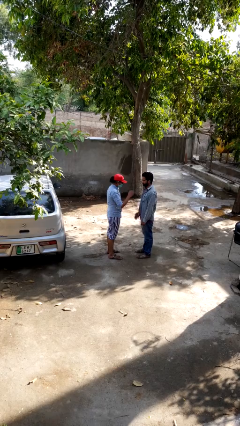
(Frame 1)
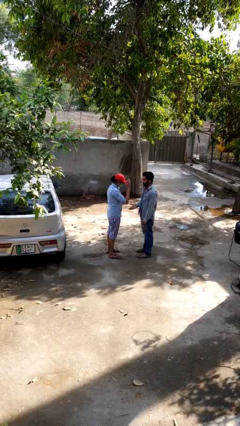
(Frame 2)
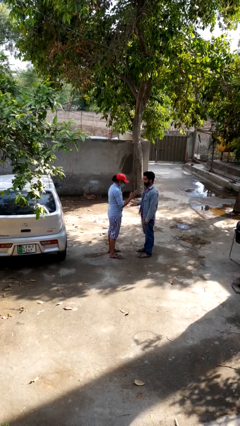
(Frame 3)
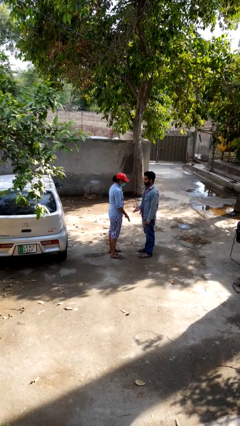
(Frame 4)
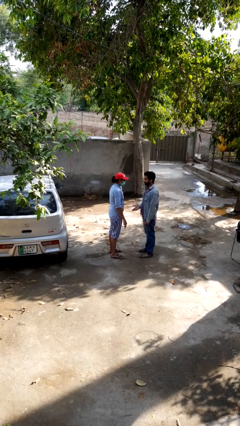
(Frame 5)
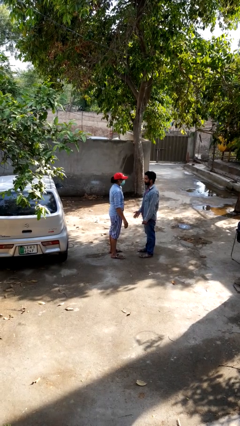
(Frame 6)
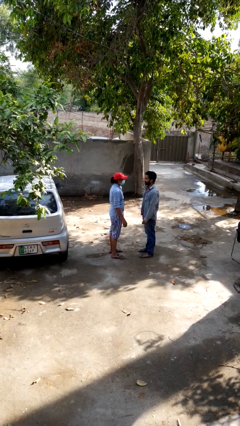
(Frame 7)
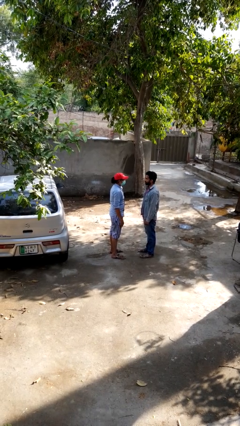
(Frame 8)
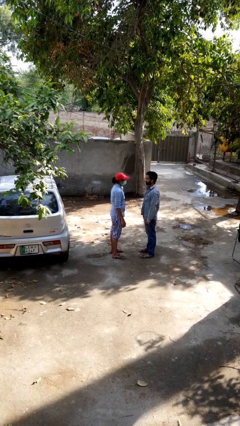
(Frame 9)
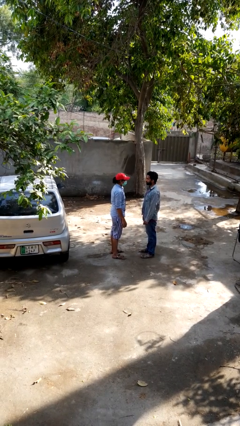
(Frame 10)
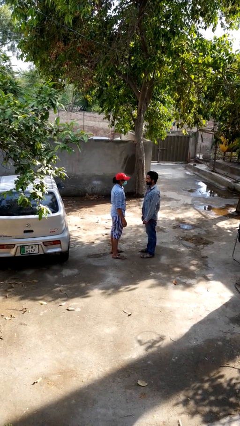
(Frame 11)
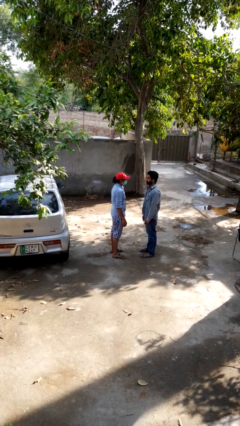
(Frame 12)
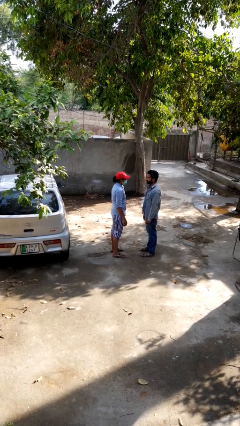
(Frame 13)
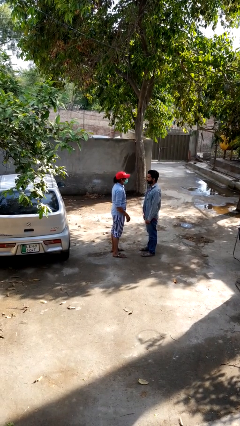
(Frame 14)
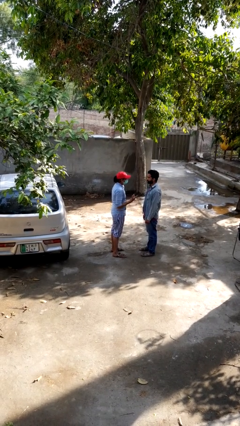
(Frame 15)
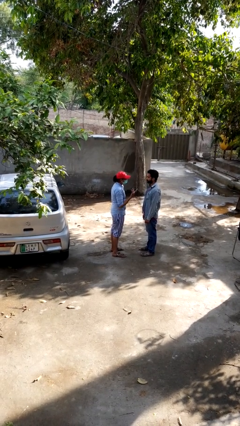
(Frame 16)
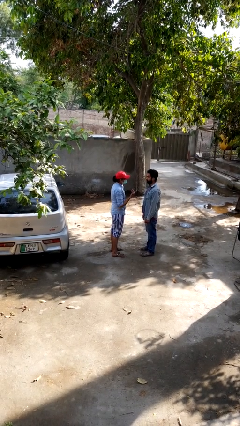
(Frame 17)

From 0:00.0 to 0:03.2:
person highfives hand

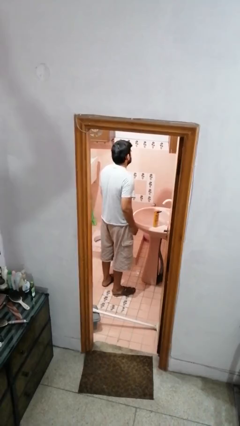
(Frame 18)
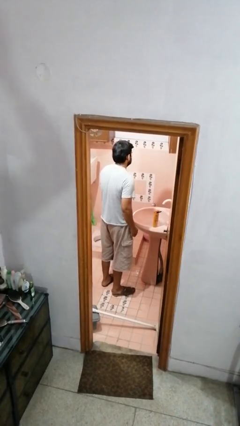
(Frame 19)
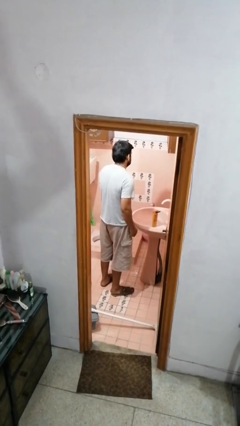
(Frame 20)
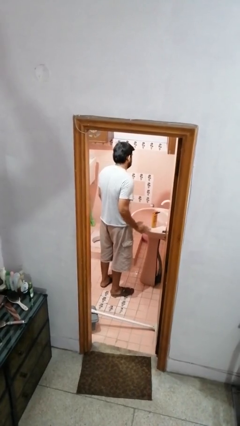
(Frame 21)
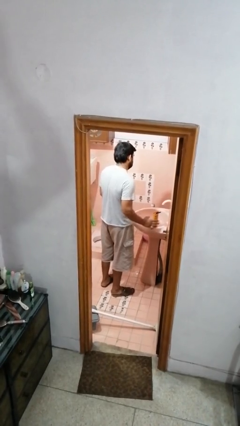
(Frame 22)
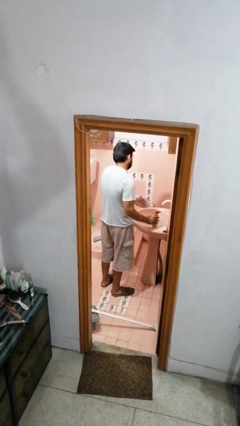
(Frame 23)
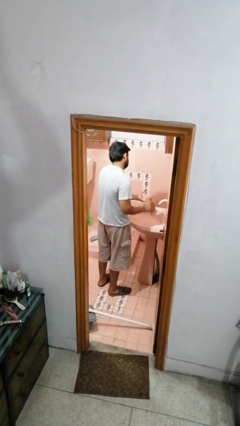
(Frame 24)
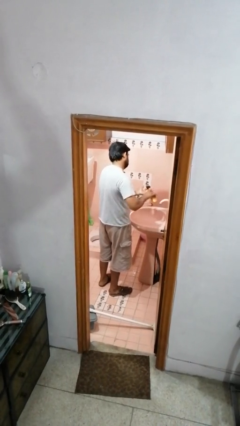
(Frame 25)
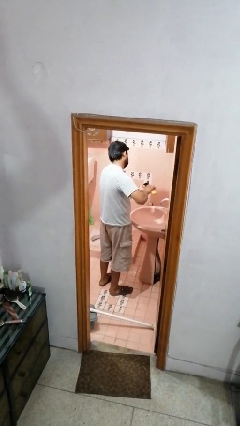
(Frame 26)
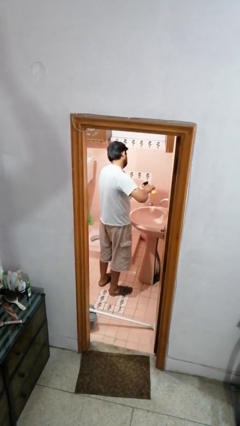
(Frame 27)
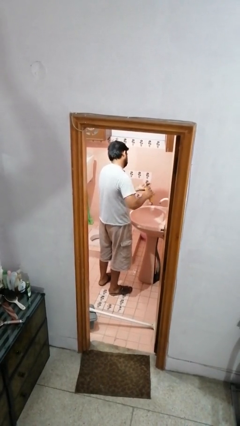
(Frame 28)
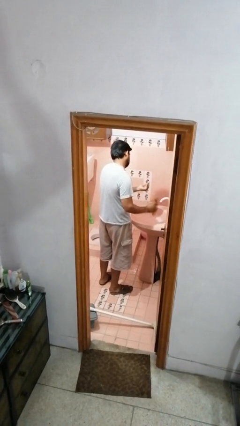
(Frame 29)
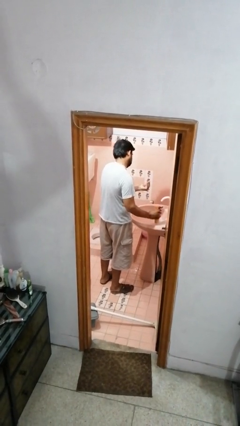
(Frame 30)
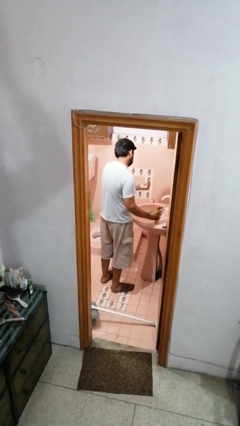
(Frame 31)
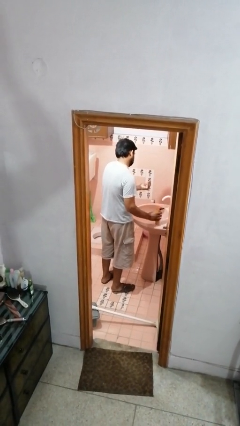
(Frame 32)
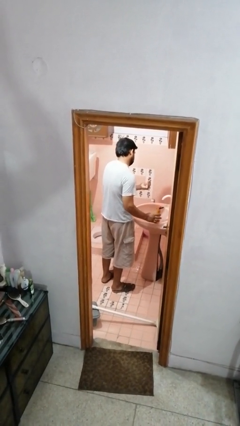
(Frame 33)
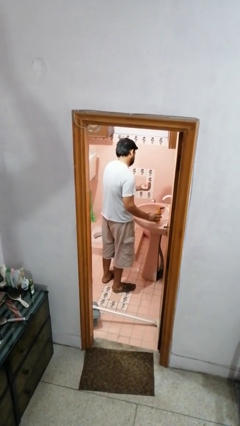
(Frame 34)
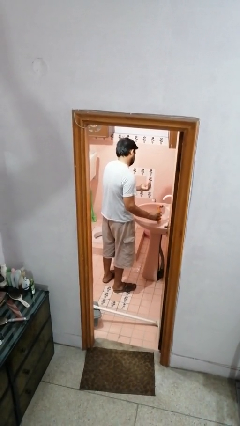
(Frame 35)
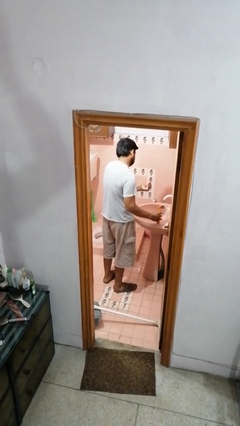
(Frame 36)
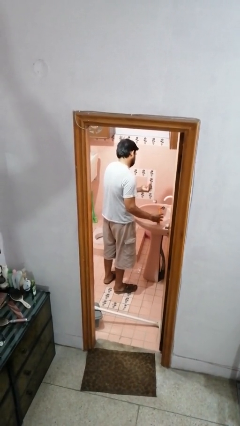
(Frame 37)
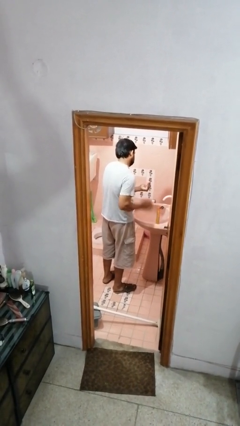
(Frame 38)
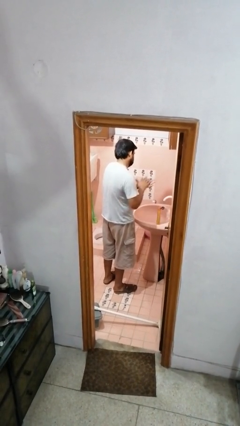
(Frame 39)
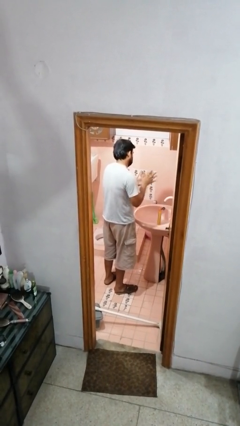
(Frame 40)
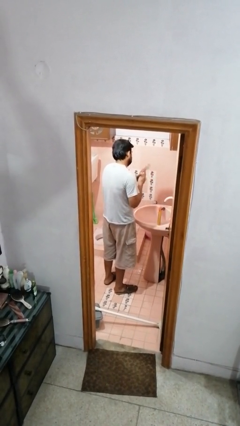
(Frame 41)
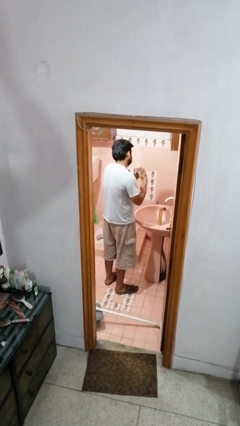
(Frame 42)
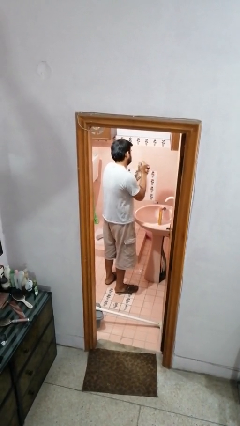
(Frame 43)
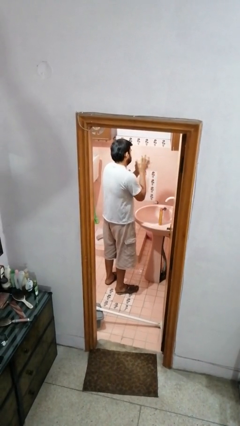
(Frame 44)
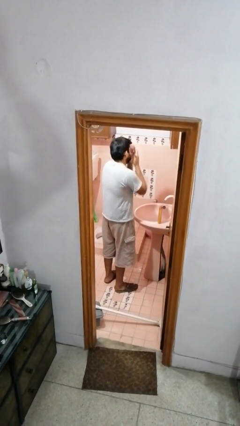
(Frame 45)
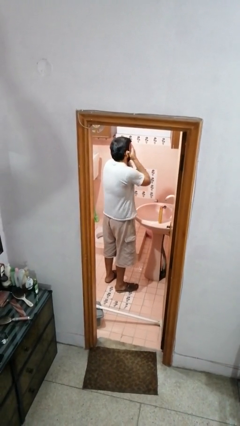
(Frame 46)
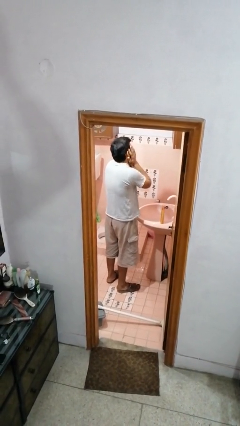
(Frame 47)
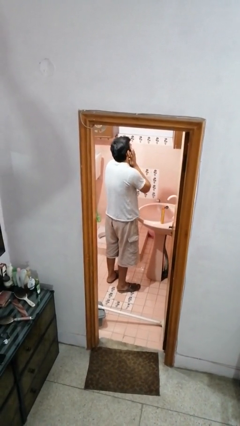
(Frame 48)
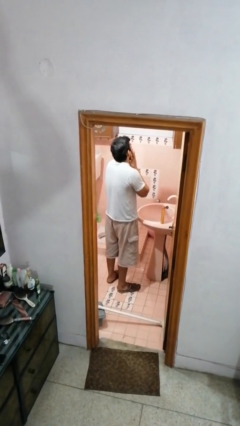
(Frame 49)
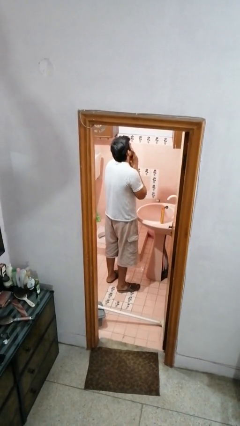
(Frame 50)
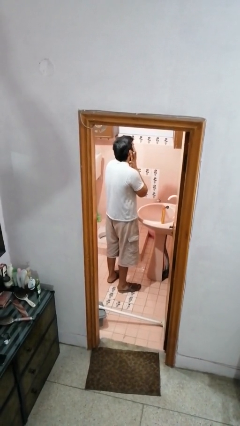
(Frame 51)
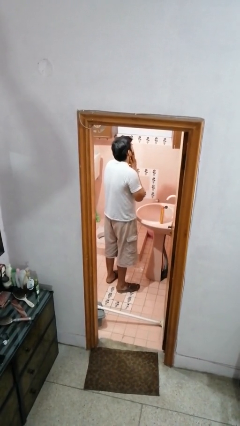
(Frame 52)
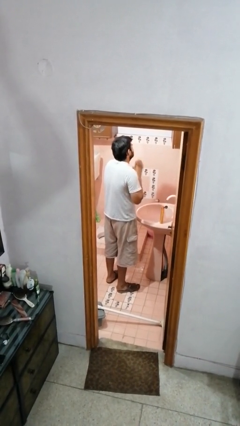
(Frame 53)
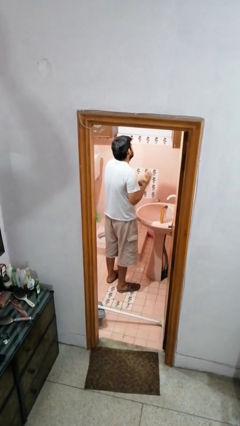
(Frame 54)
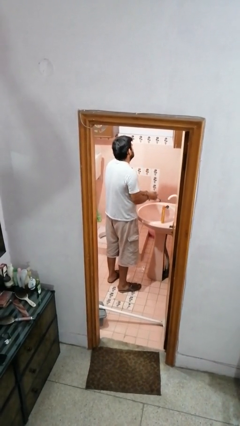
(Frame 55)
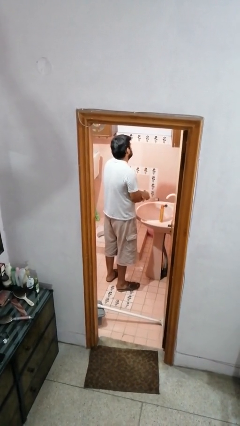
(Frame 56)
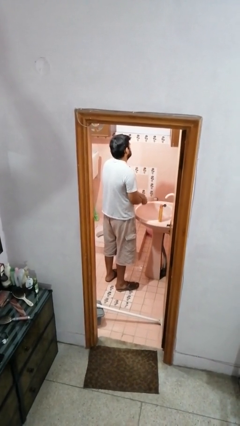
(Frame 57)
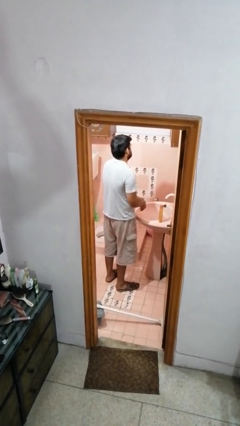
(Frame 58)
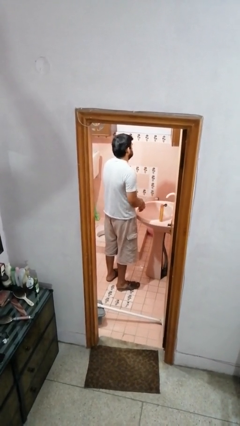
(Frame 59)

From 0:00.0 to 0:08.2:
person applies facial moisturizer

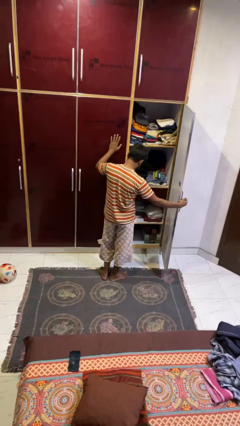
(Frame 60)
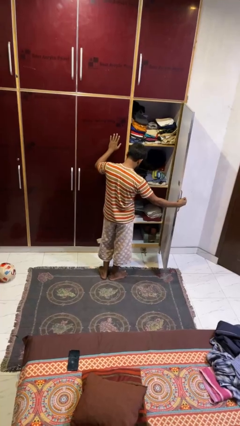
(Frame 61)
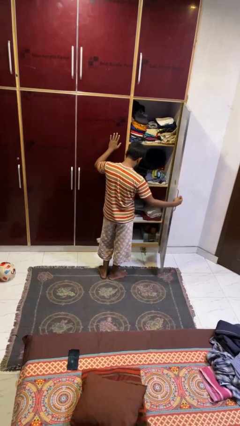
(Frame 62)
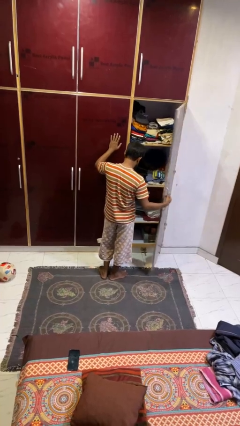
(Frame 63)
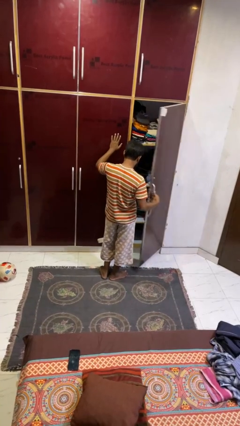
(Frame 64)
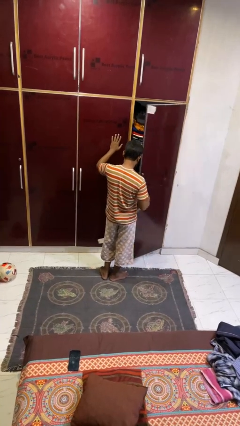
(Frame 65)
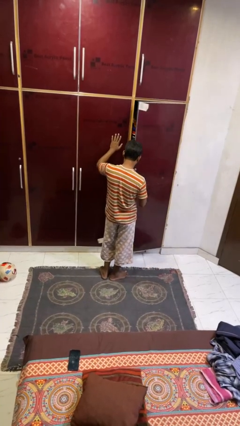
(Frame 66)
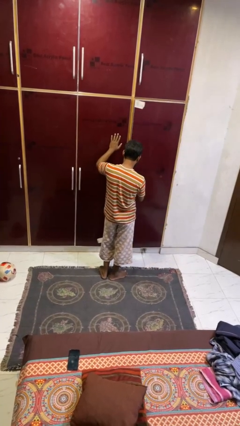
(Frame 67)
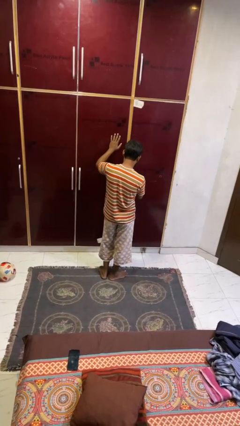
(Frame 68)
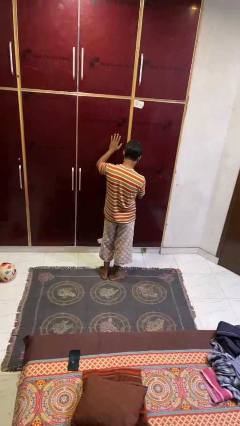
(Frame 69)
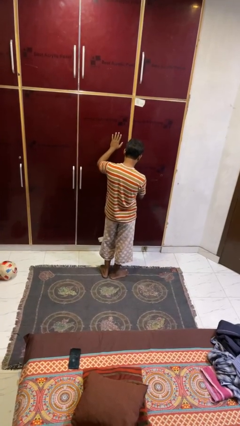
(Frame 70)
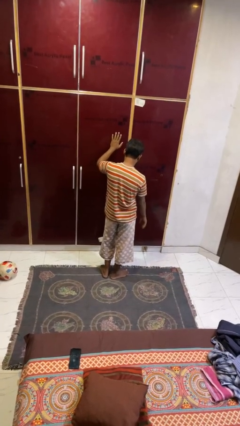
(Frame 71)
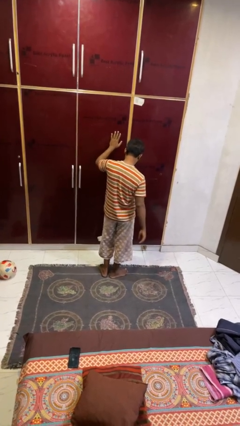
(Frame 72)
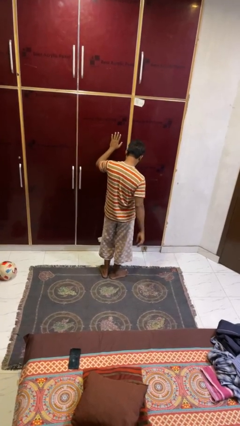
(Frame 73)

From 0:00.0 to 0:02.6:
person closes closet door

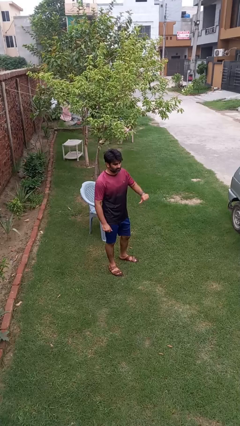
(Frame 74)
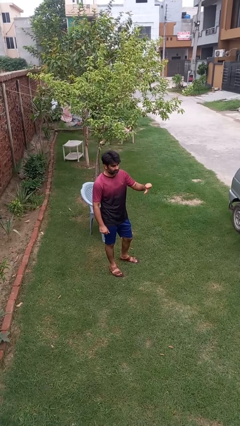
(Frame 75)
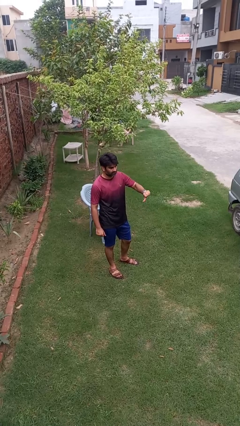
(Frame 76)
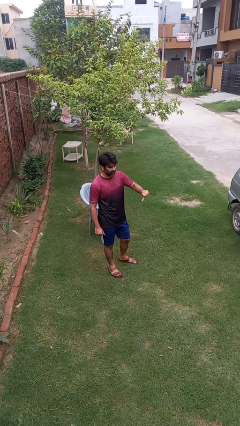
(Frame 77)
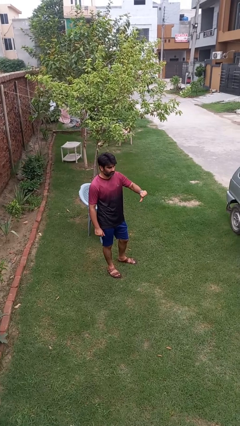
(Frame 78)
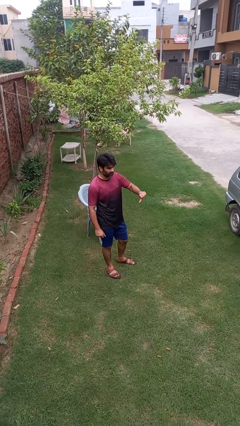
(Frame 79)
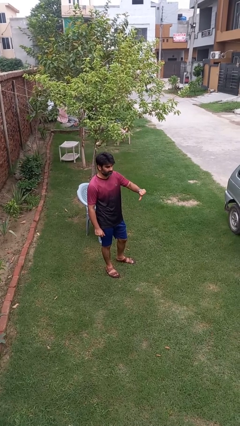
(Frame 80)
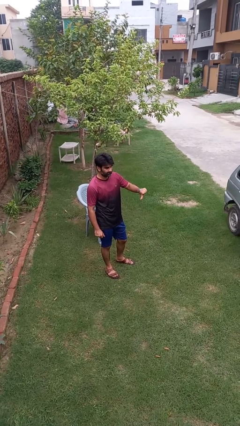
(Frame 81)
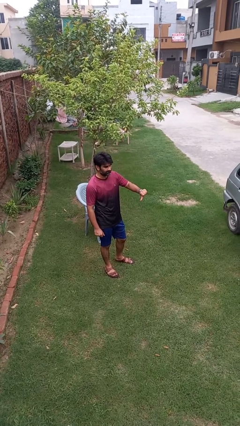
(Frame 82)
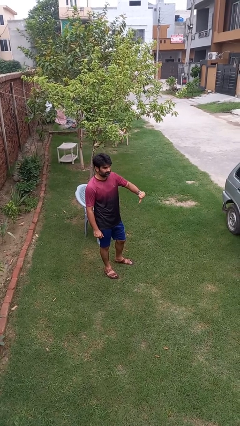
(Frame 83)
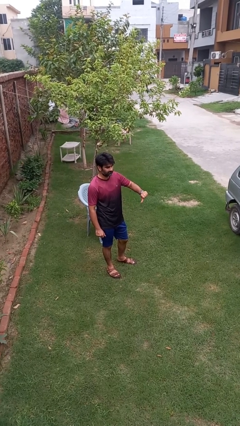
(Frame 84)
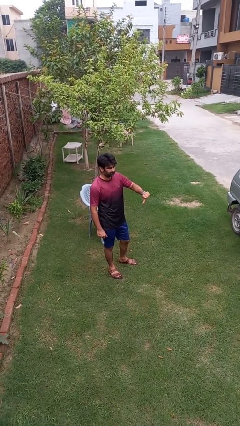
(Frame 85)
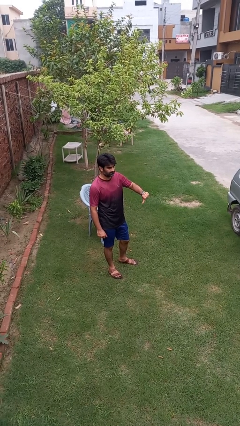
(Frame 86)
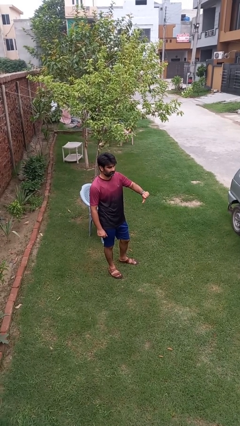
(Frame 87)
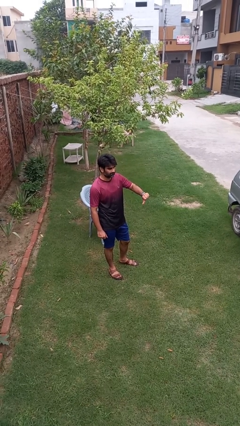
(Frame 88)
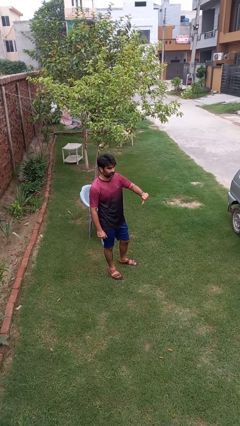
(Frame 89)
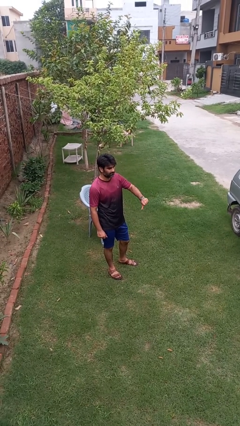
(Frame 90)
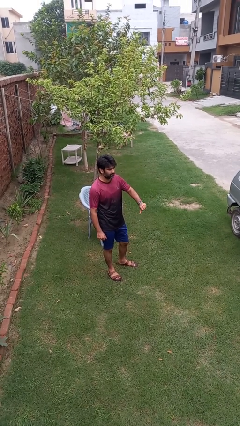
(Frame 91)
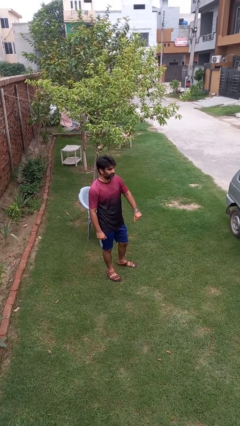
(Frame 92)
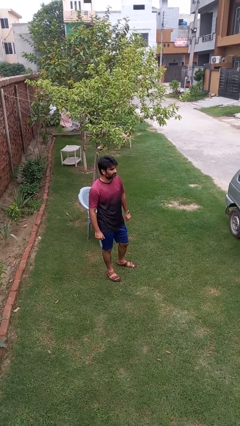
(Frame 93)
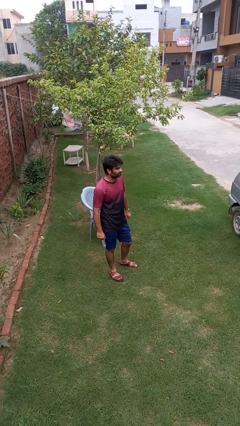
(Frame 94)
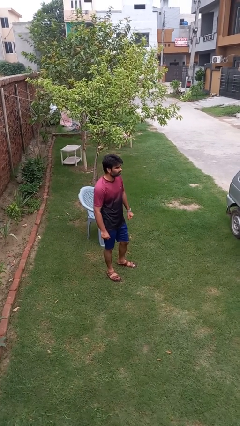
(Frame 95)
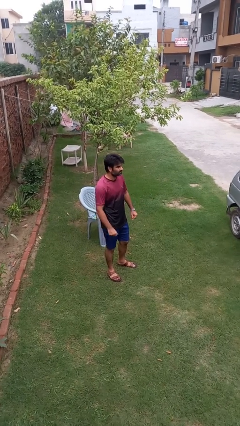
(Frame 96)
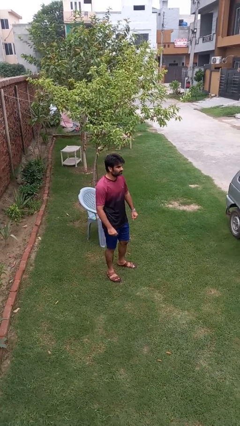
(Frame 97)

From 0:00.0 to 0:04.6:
person gestures thumbs down
